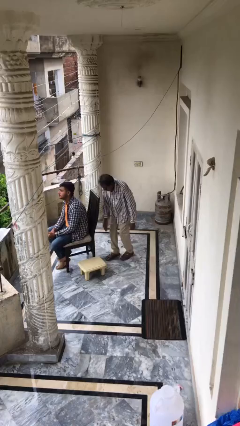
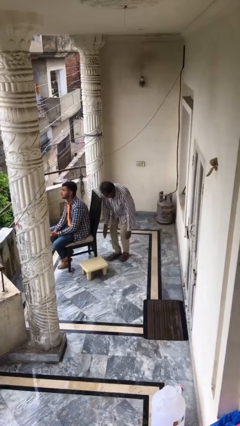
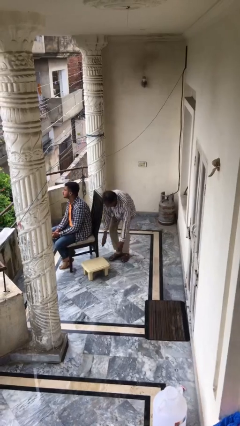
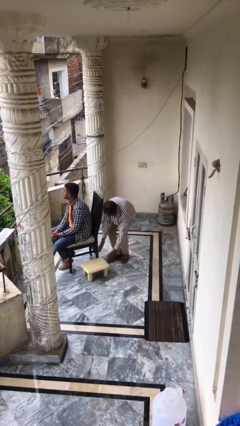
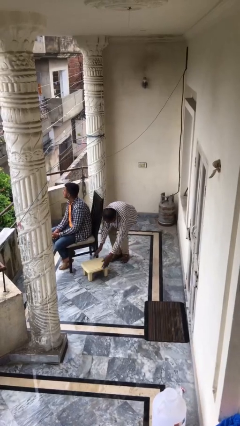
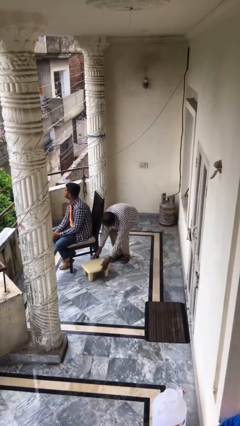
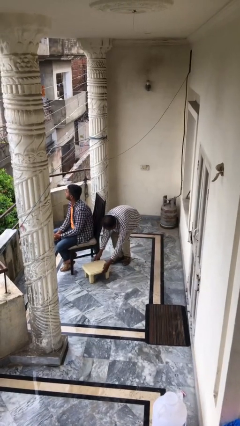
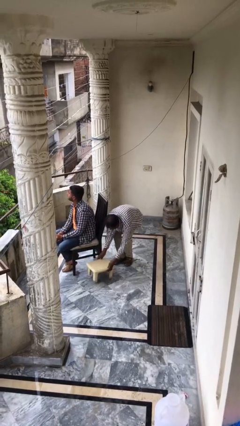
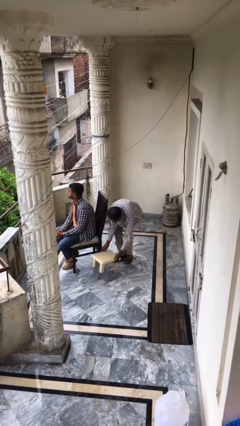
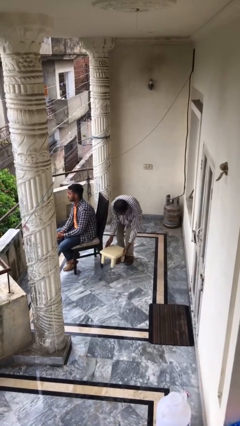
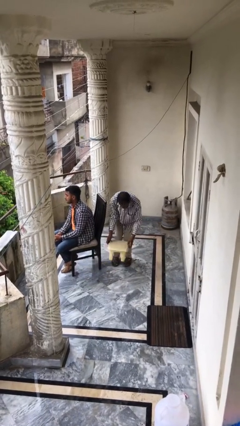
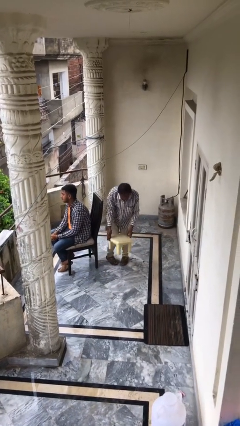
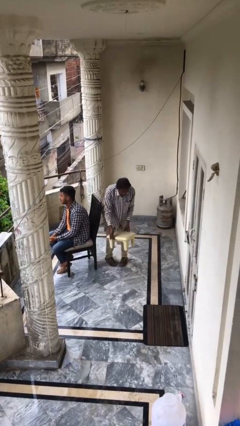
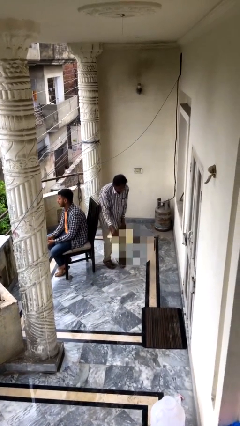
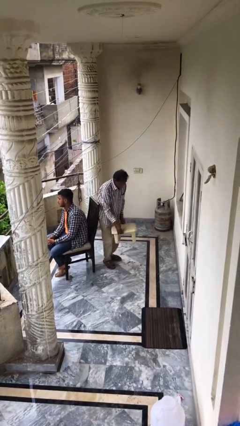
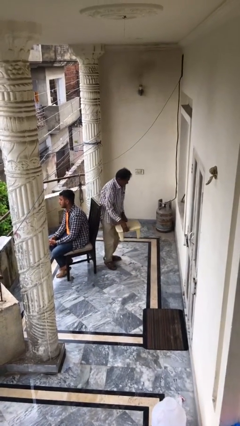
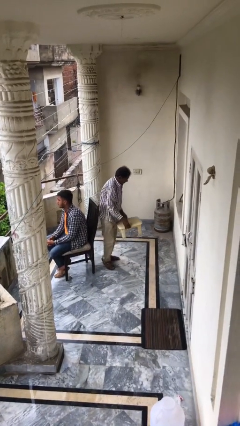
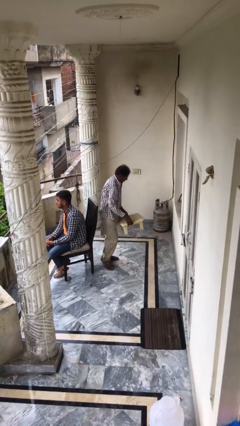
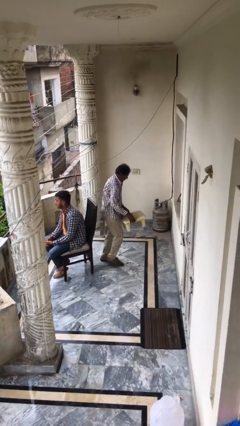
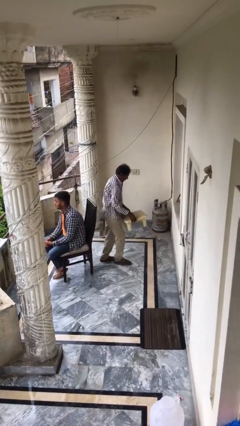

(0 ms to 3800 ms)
person steals object from person

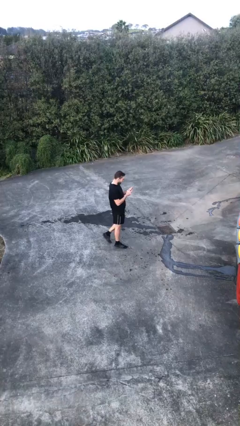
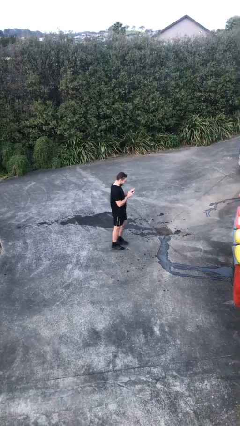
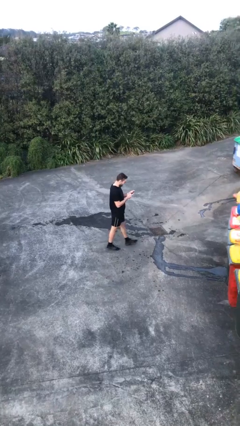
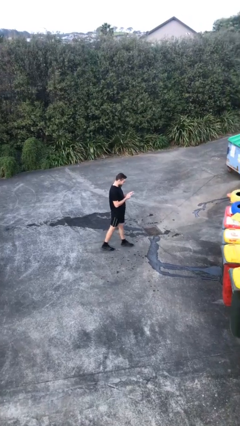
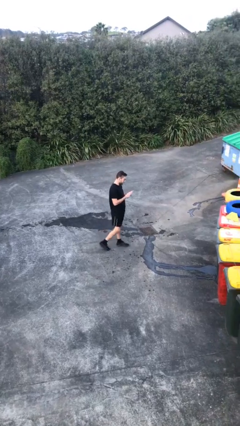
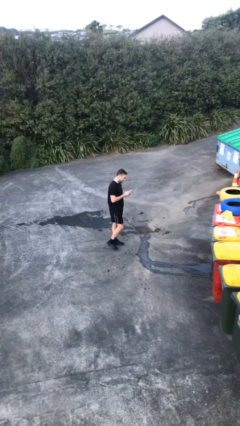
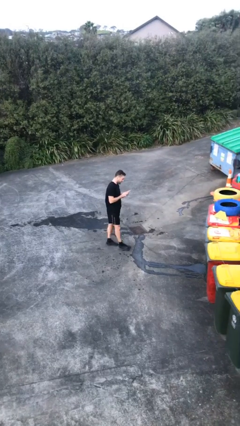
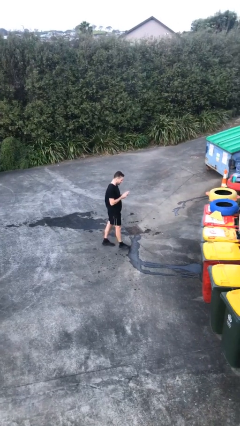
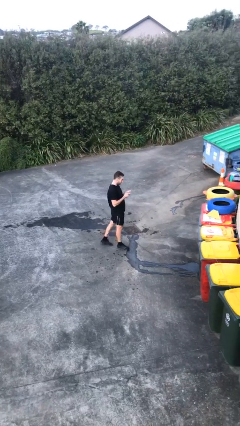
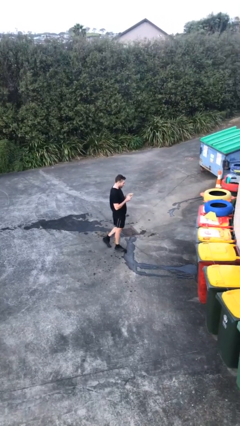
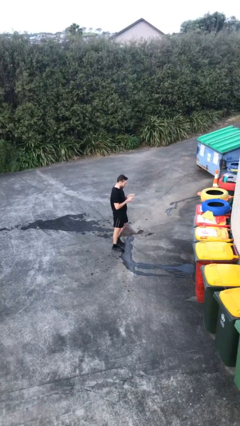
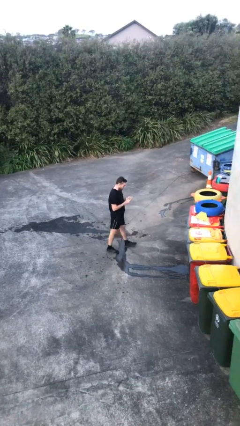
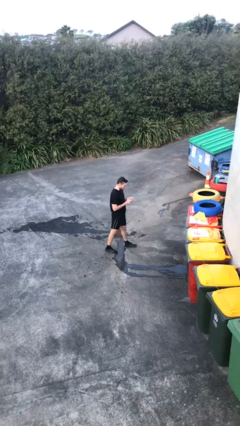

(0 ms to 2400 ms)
person texts on phone

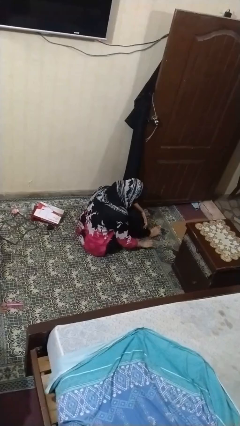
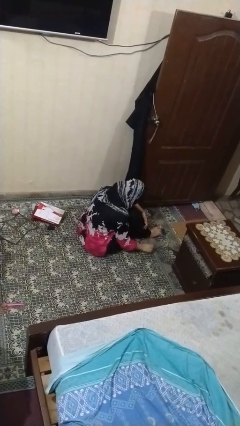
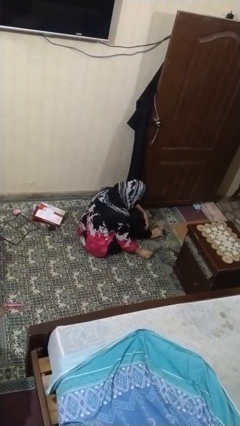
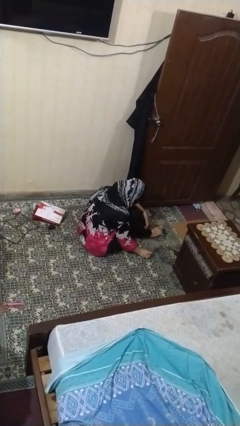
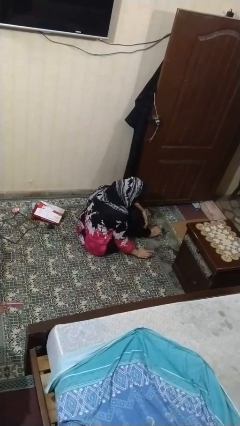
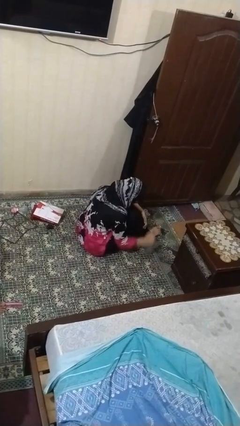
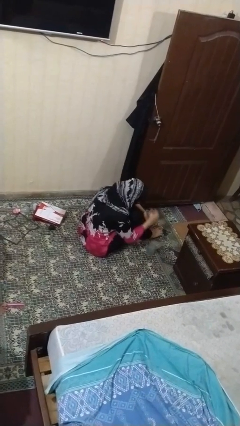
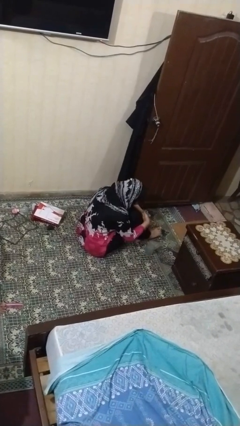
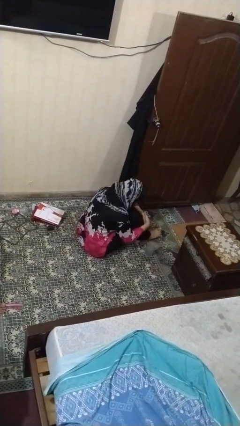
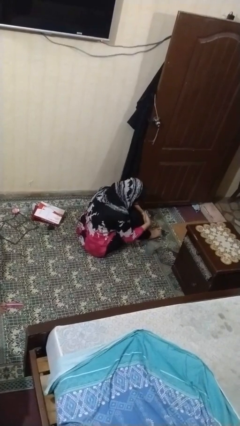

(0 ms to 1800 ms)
person sets upright glass

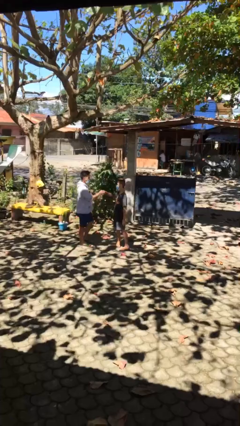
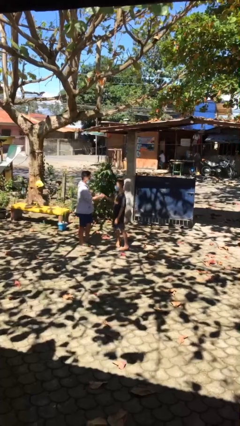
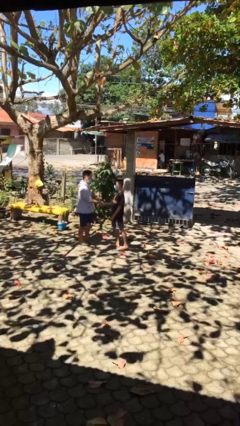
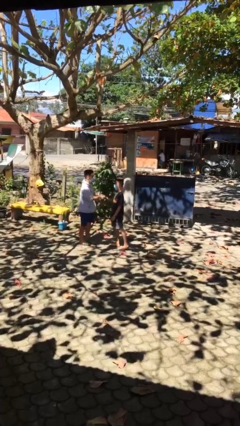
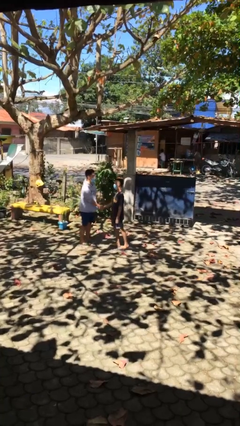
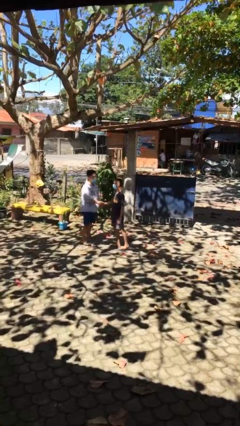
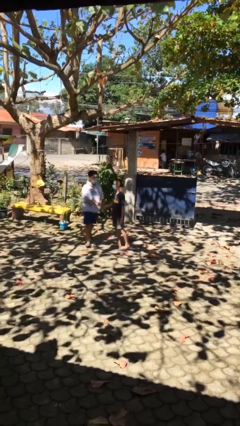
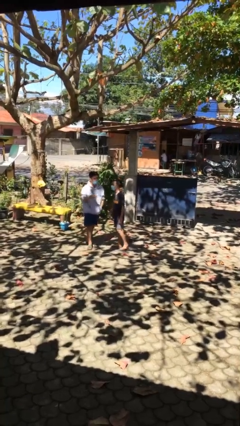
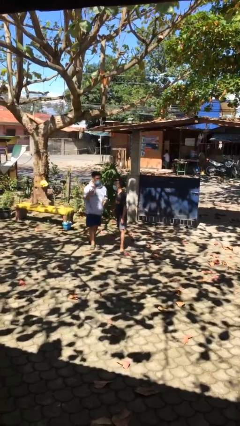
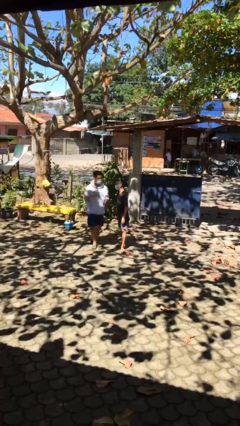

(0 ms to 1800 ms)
person shakes hand

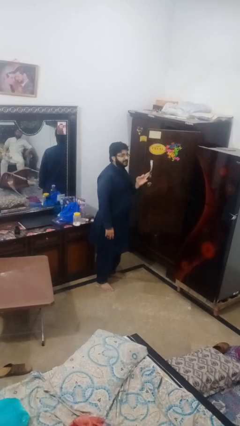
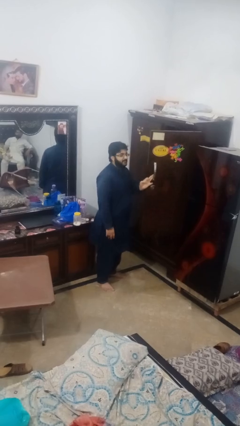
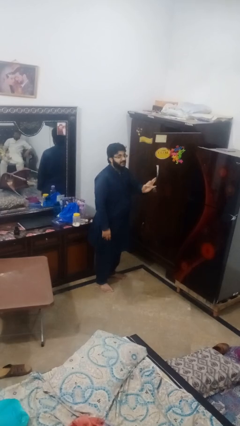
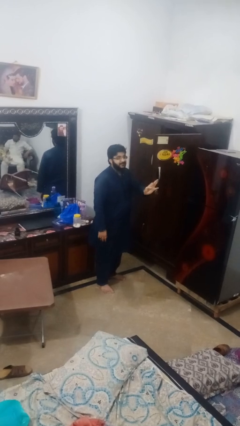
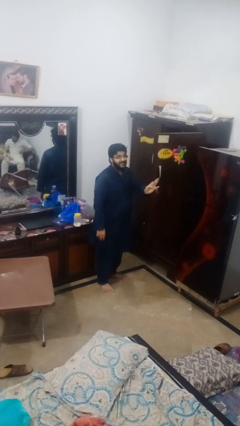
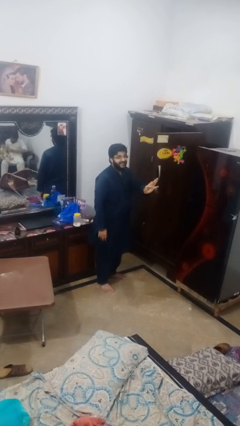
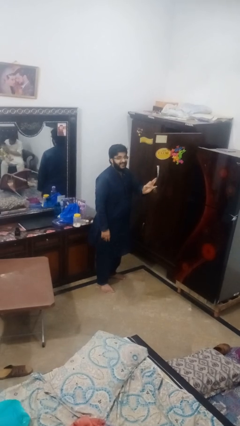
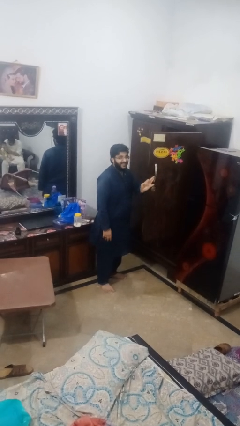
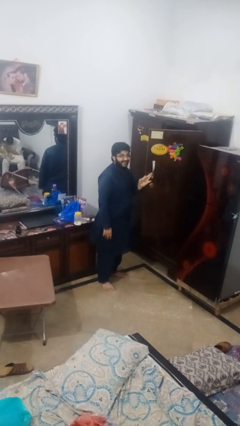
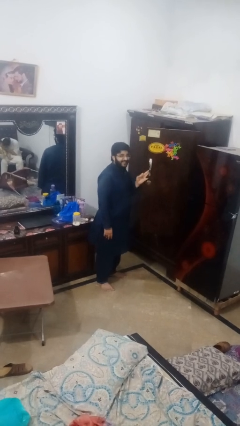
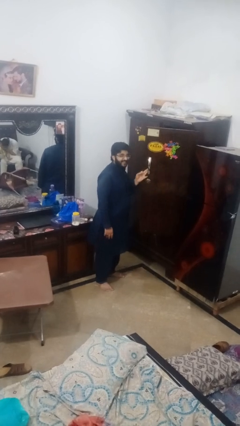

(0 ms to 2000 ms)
person opens closet door

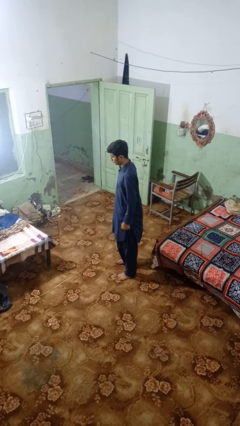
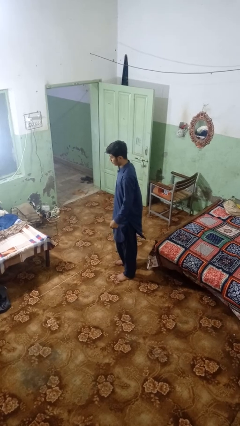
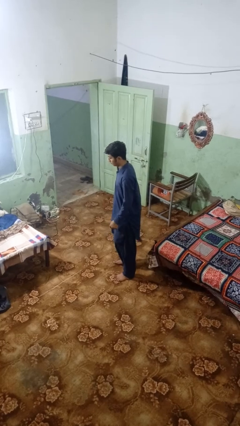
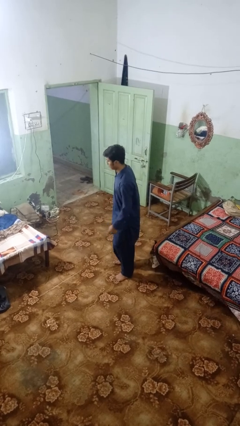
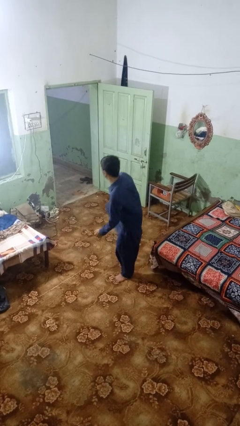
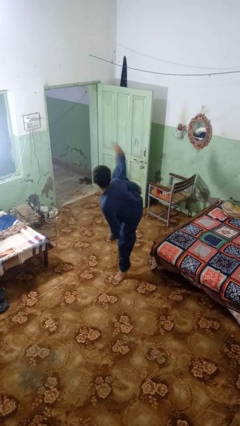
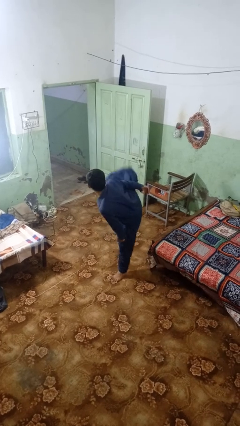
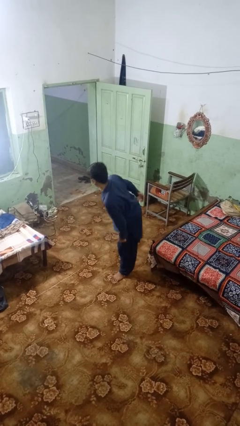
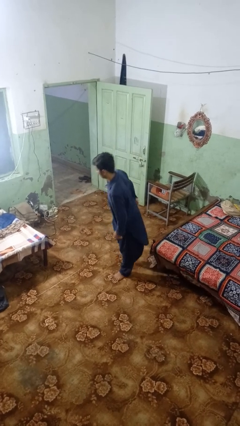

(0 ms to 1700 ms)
person karate kicks

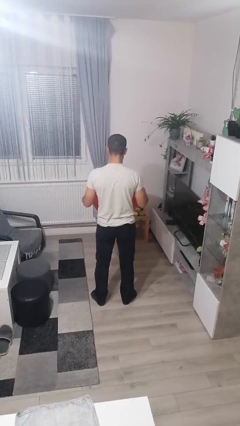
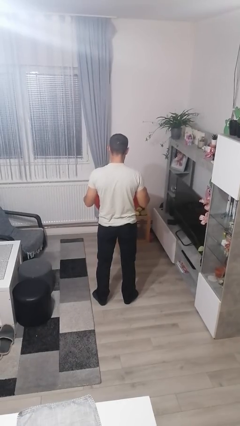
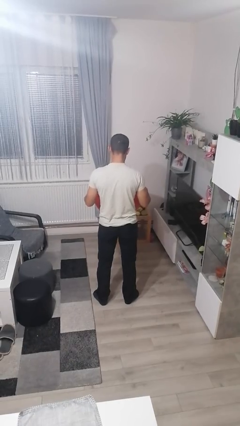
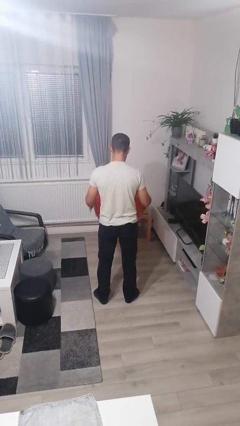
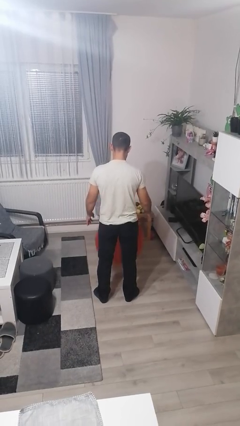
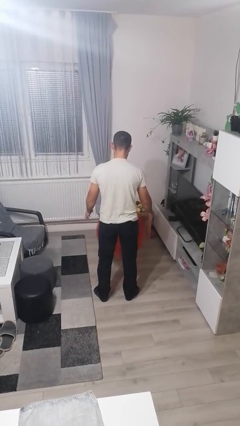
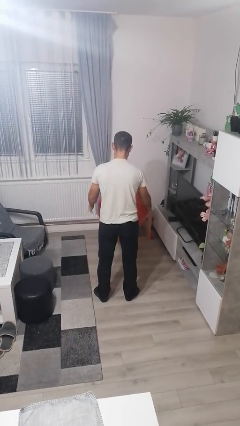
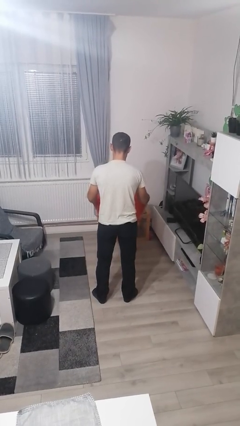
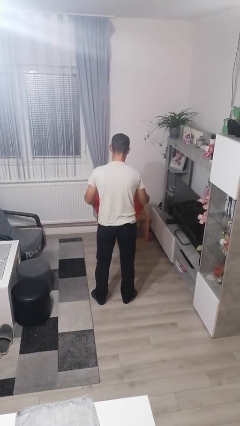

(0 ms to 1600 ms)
person bounces ball on floor

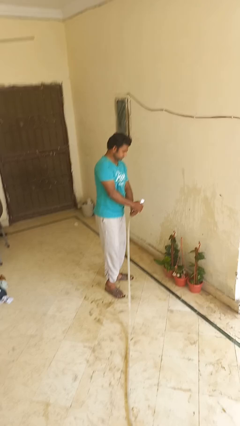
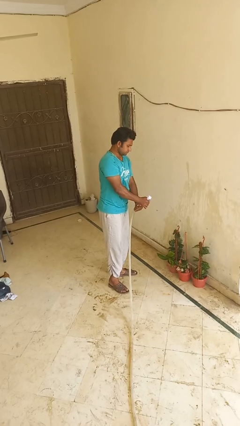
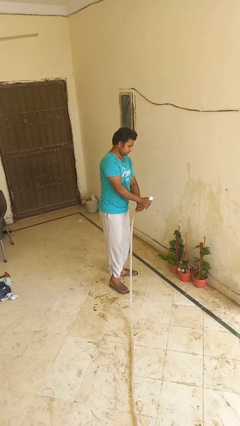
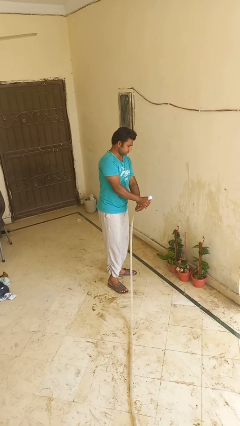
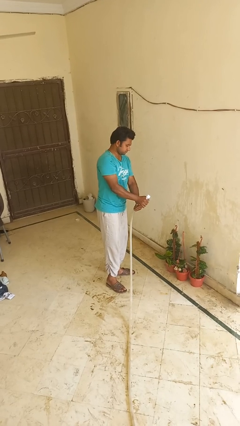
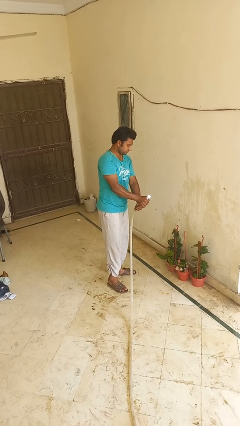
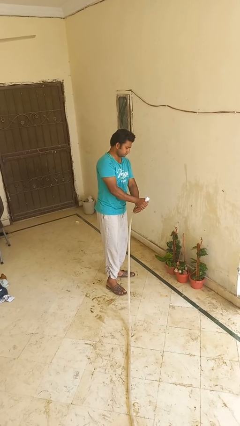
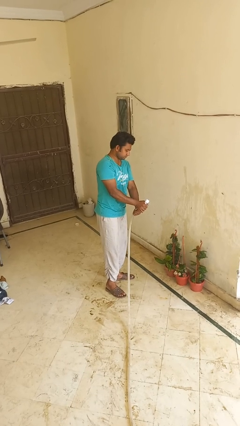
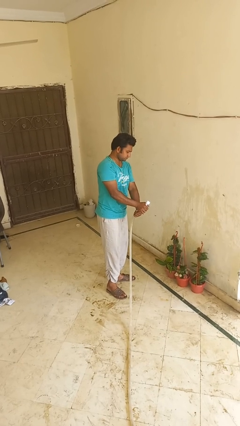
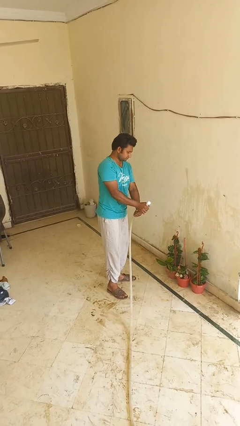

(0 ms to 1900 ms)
person waters houseplant

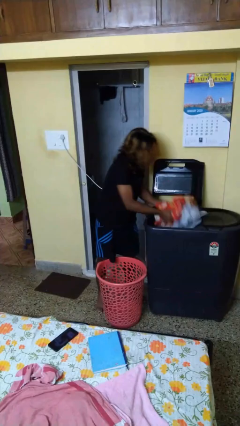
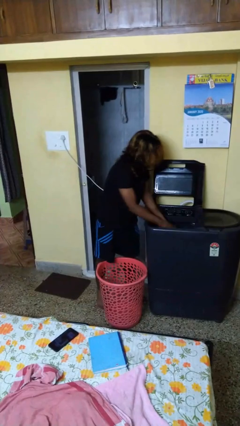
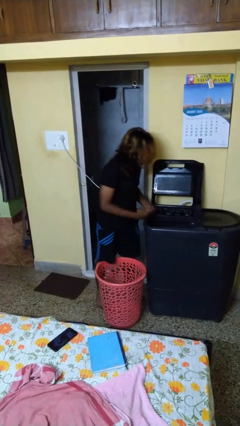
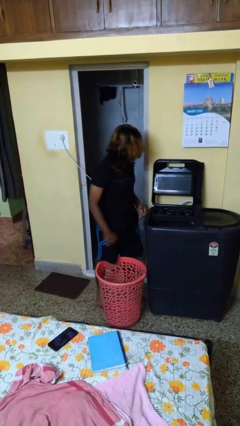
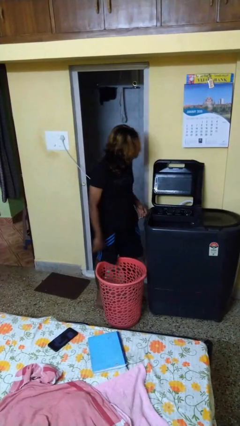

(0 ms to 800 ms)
person loads clotheswasher
